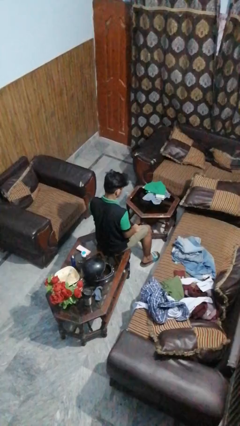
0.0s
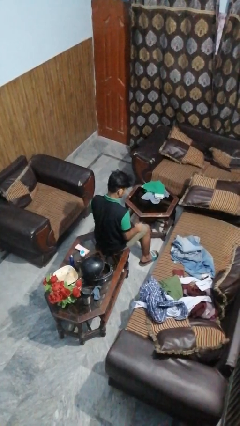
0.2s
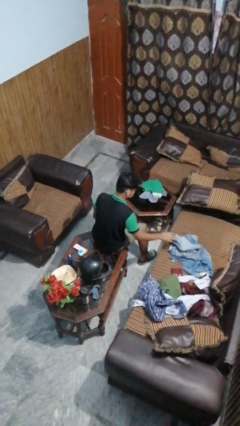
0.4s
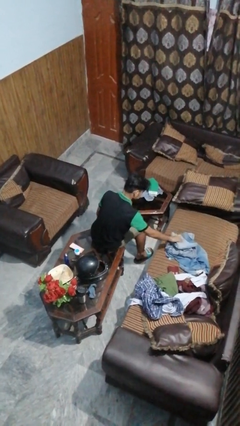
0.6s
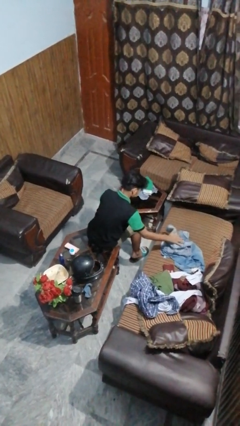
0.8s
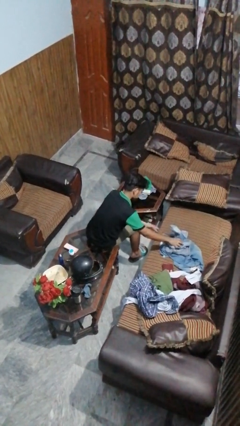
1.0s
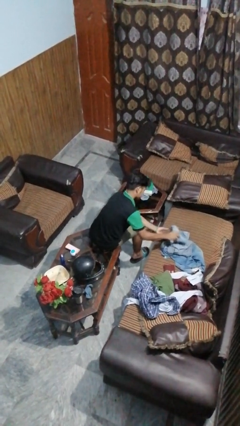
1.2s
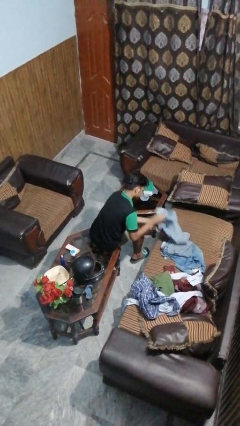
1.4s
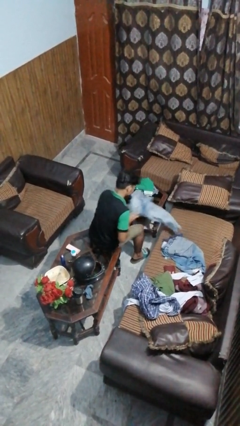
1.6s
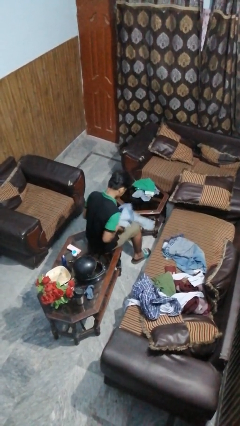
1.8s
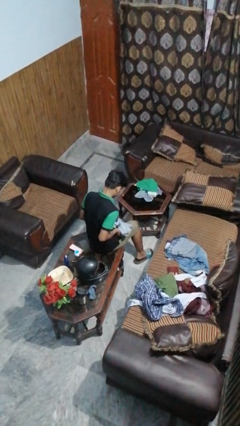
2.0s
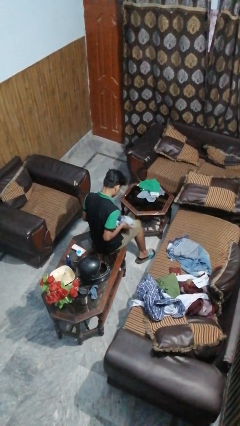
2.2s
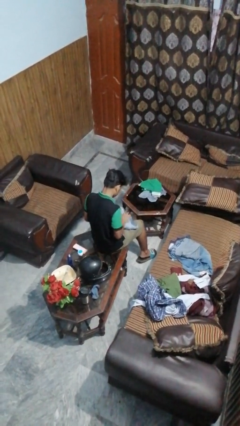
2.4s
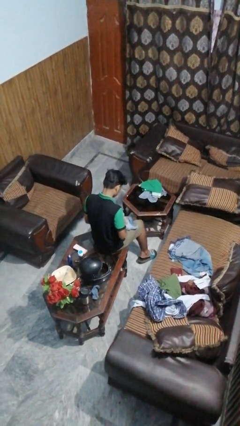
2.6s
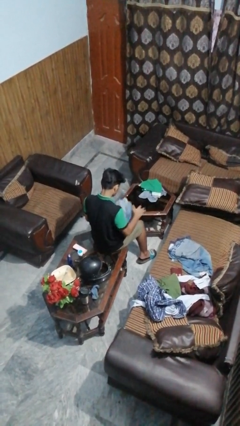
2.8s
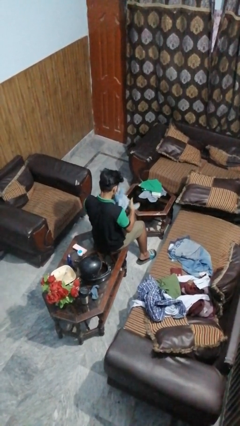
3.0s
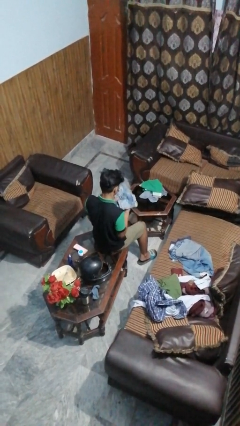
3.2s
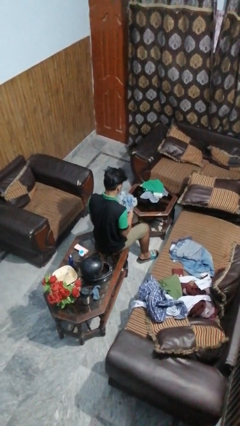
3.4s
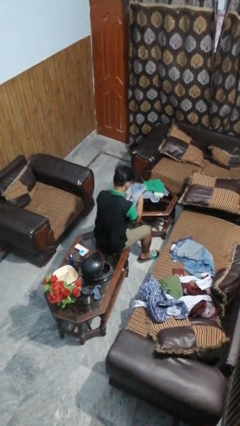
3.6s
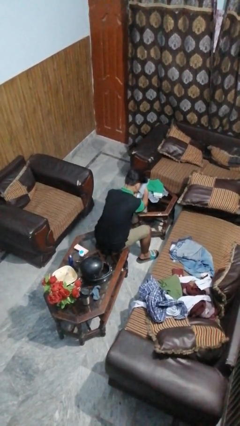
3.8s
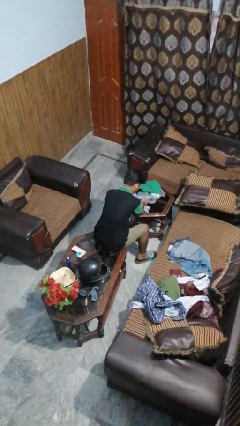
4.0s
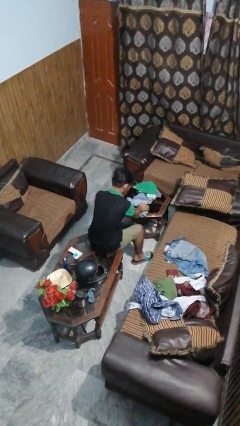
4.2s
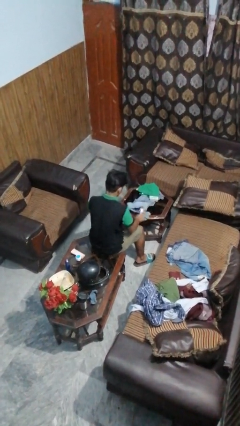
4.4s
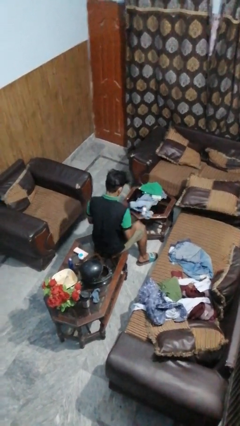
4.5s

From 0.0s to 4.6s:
person folds pants

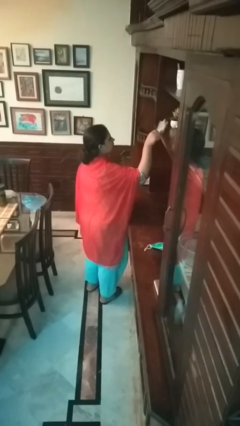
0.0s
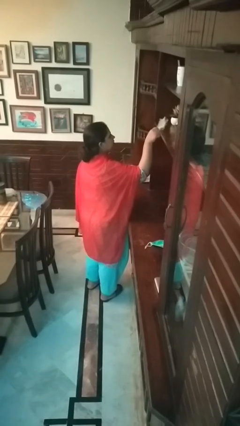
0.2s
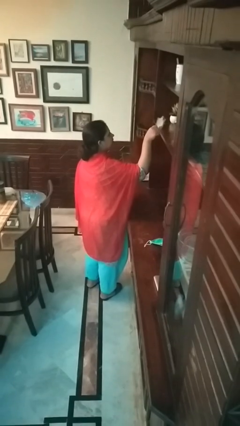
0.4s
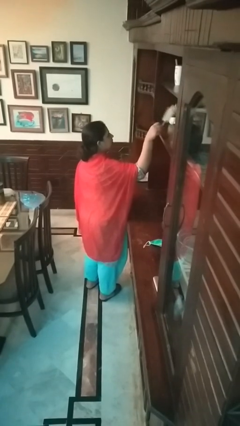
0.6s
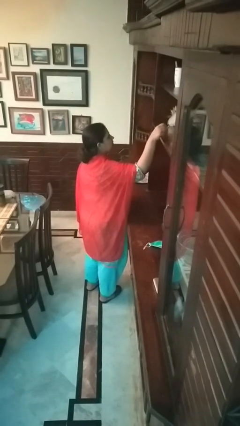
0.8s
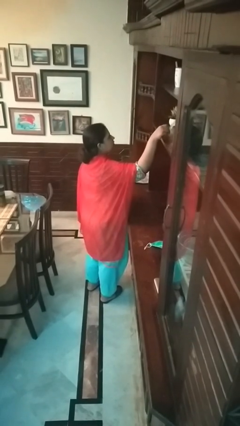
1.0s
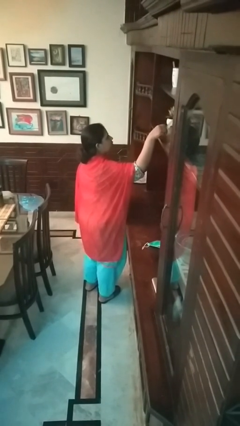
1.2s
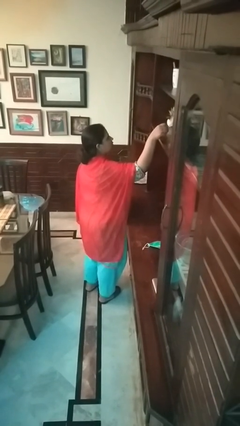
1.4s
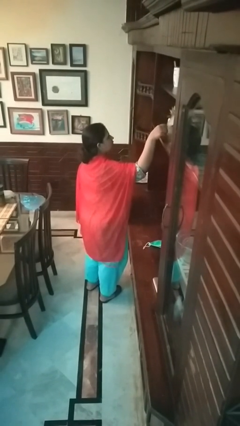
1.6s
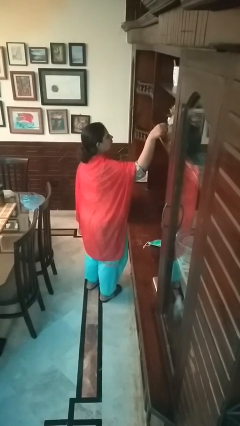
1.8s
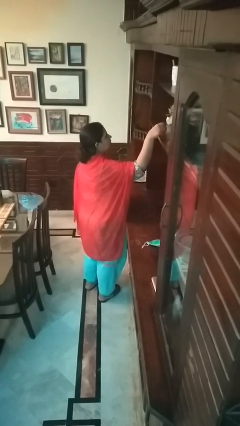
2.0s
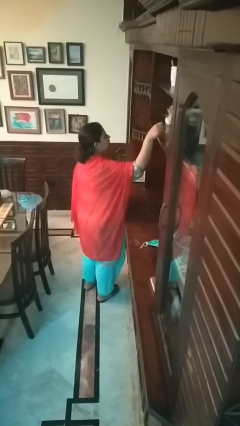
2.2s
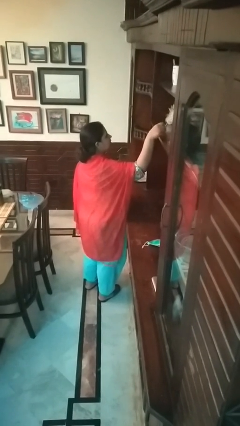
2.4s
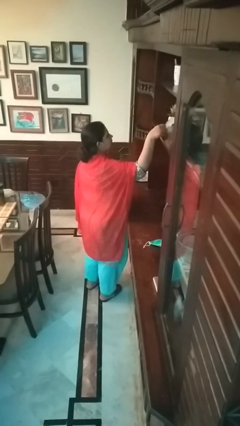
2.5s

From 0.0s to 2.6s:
person dusts furniture

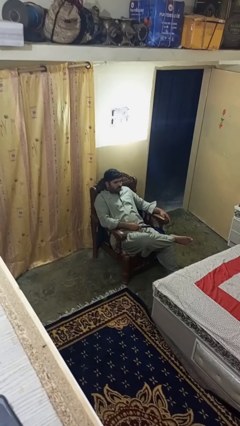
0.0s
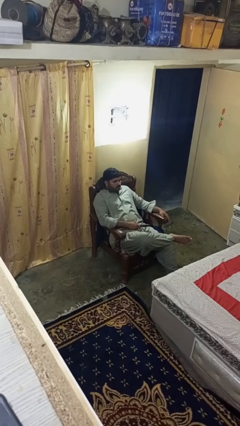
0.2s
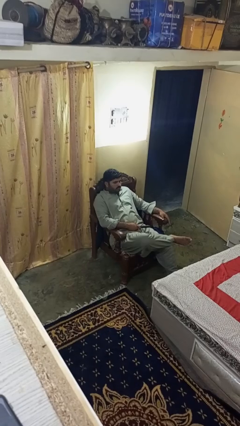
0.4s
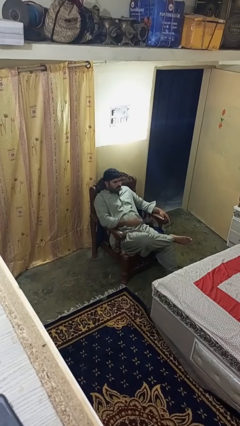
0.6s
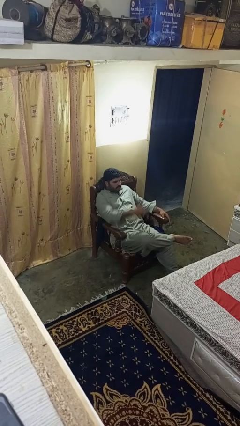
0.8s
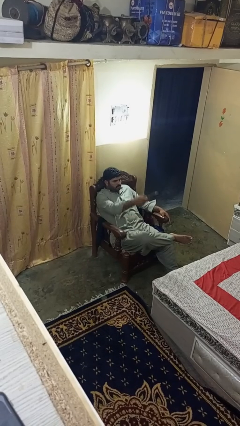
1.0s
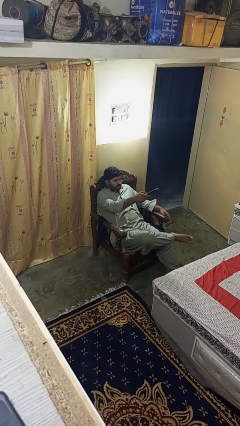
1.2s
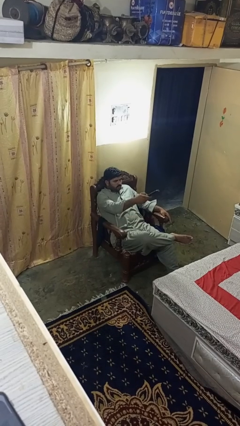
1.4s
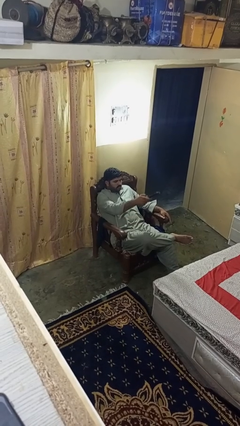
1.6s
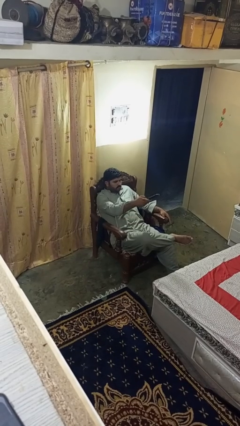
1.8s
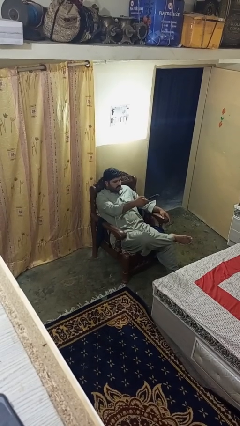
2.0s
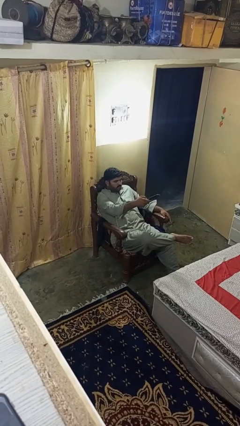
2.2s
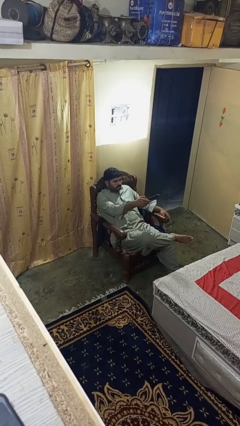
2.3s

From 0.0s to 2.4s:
person uses television remote

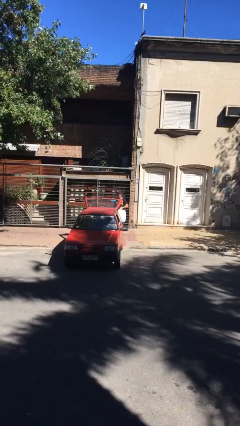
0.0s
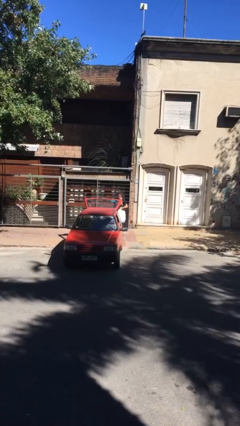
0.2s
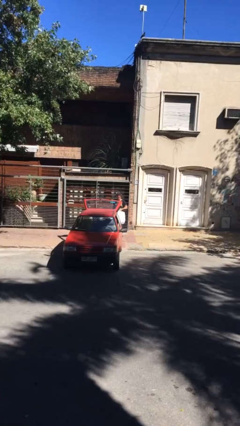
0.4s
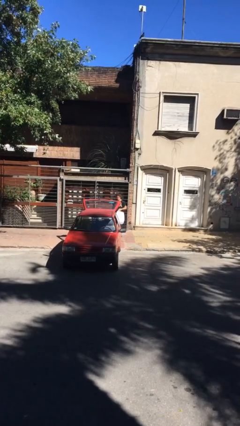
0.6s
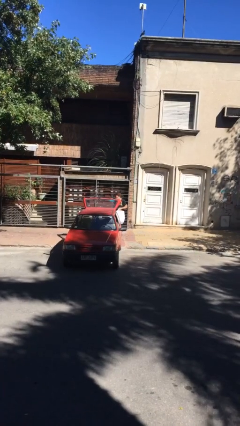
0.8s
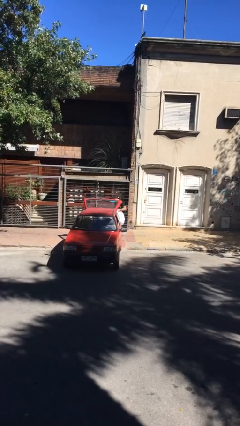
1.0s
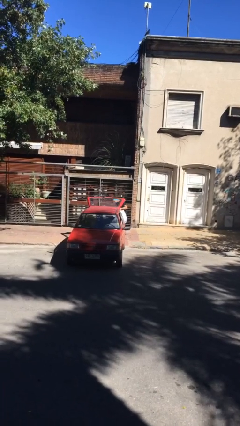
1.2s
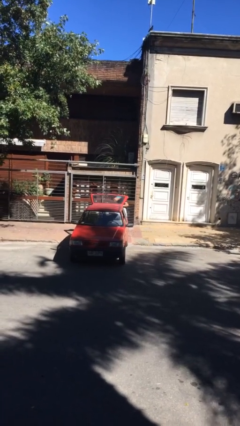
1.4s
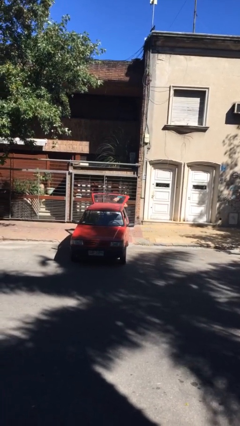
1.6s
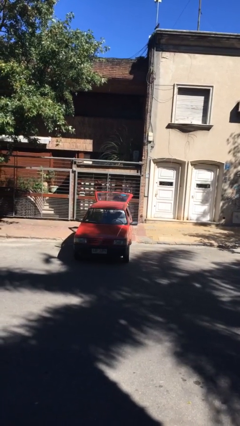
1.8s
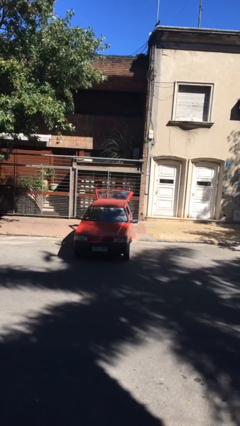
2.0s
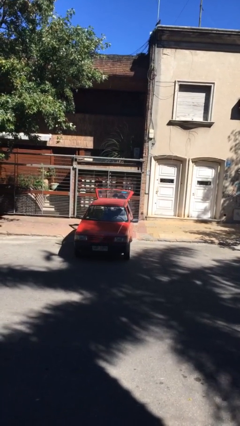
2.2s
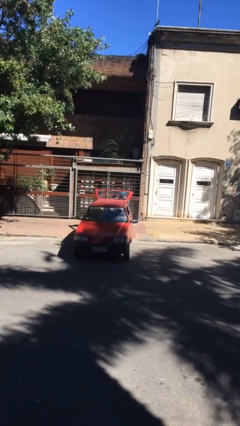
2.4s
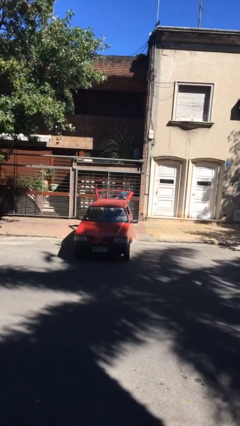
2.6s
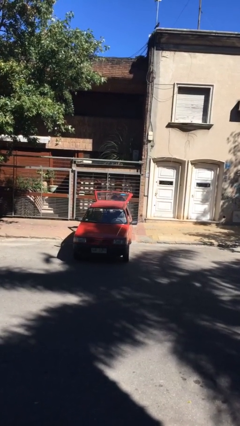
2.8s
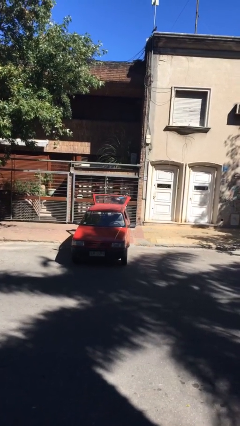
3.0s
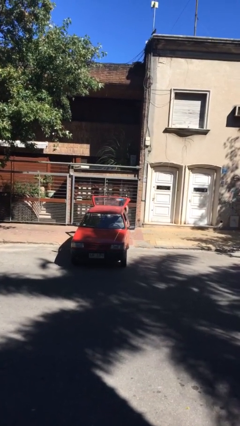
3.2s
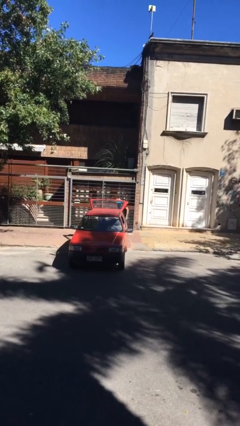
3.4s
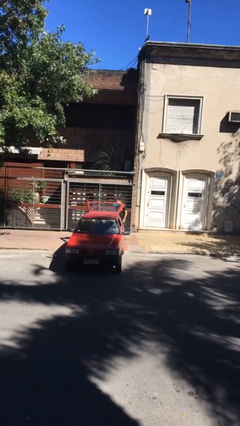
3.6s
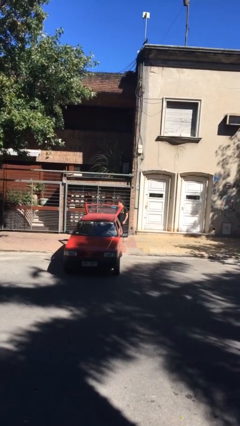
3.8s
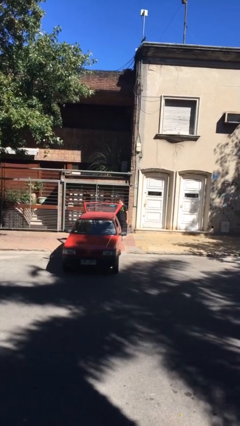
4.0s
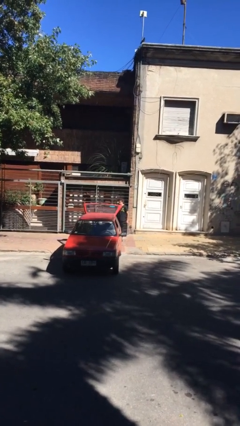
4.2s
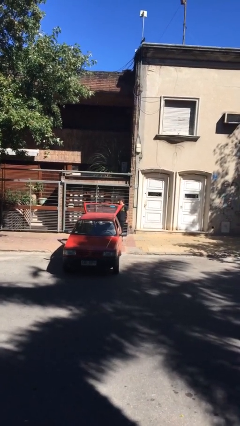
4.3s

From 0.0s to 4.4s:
person loads car

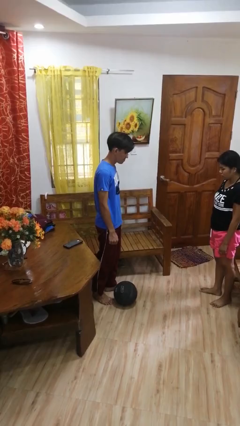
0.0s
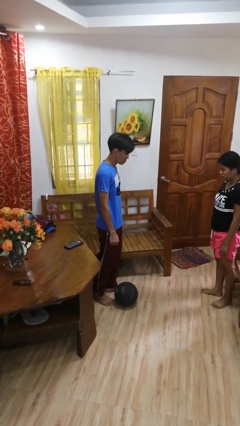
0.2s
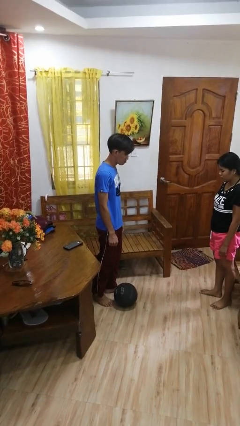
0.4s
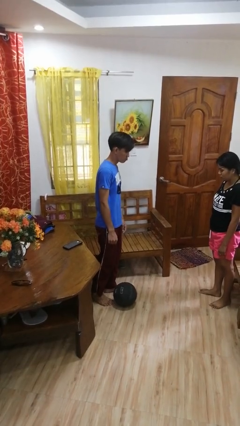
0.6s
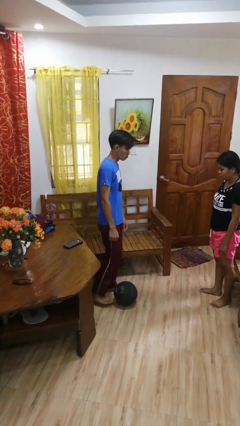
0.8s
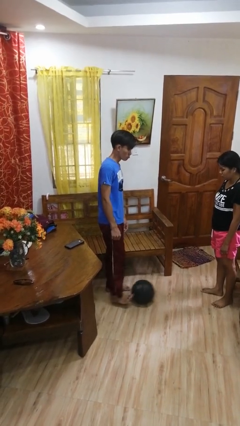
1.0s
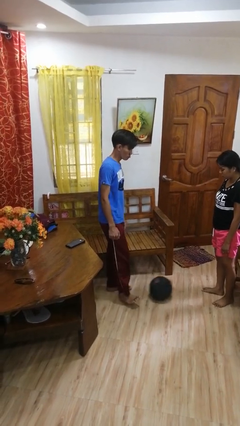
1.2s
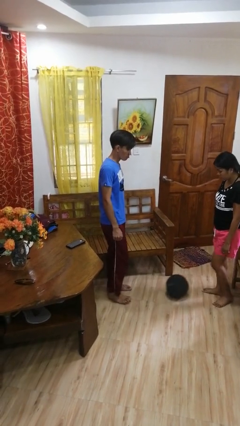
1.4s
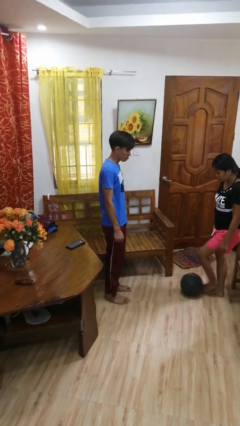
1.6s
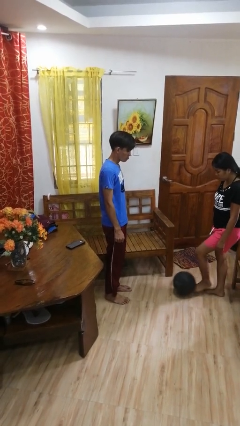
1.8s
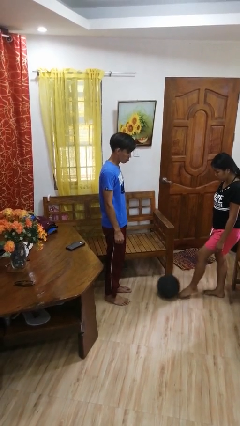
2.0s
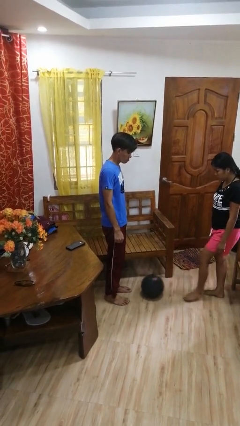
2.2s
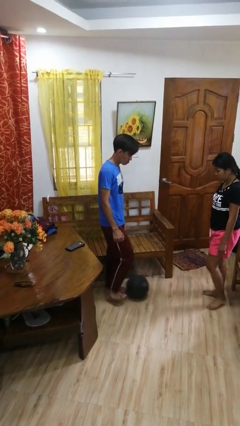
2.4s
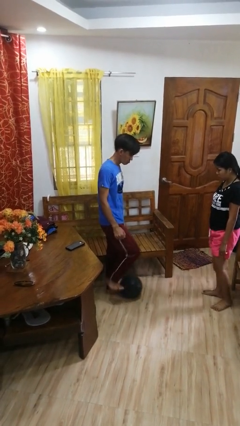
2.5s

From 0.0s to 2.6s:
person kicks object to person

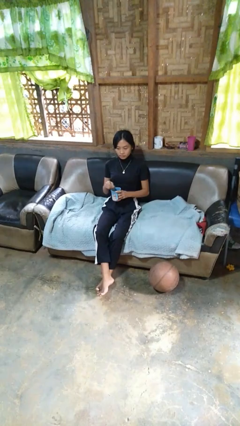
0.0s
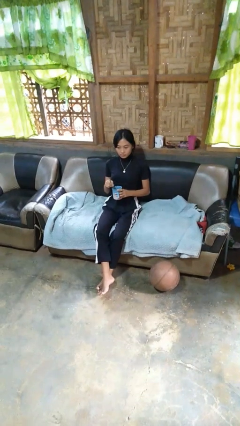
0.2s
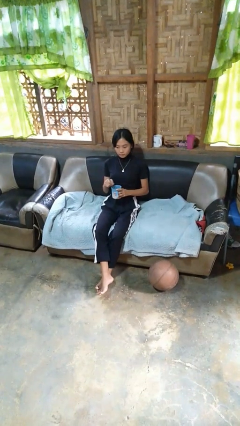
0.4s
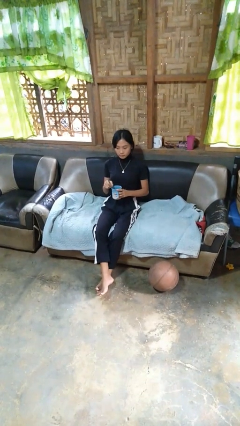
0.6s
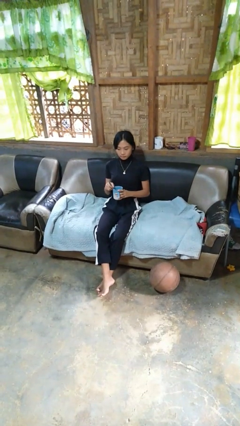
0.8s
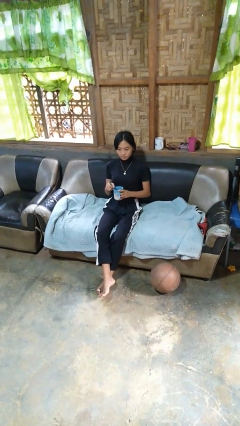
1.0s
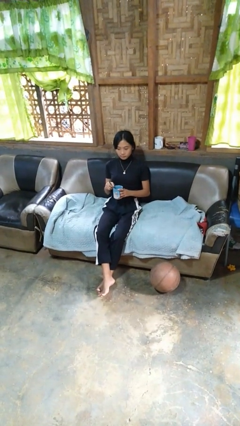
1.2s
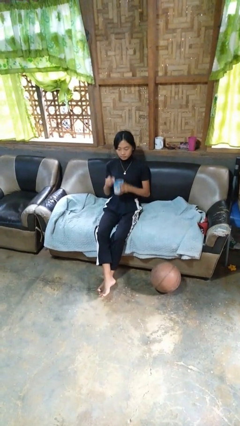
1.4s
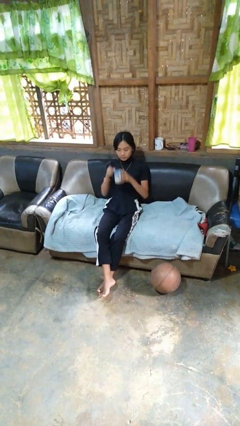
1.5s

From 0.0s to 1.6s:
person stirs mug
